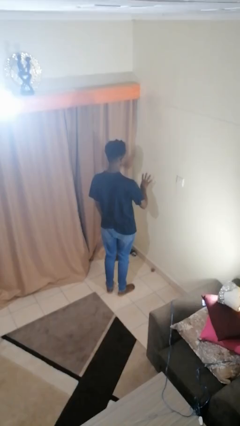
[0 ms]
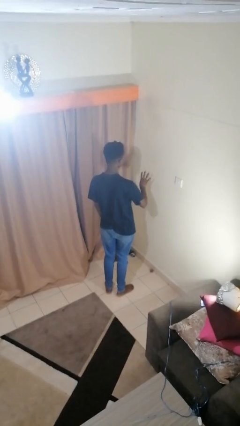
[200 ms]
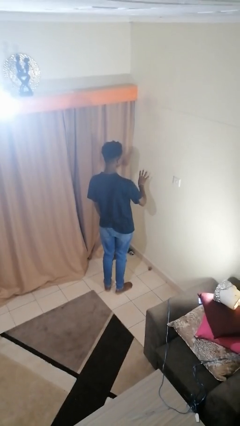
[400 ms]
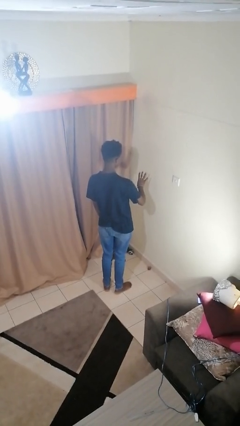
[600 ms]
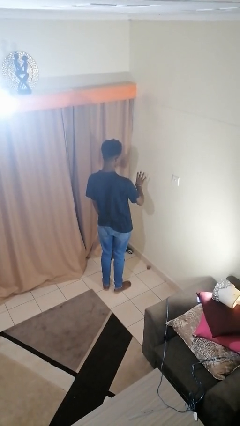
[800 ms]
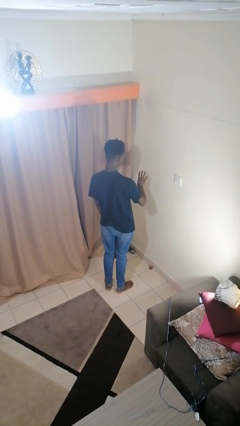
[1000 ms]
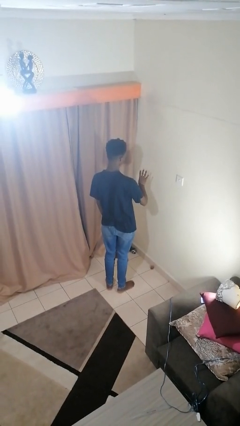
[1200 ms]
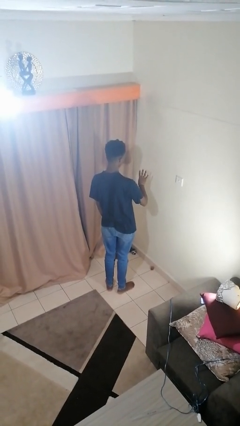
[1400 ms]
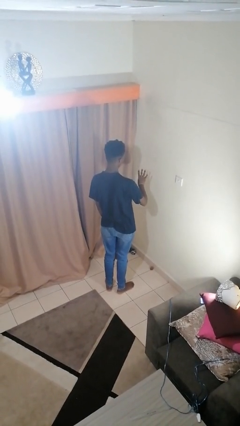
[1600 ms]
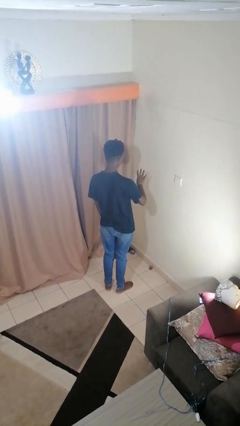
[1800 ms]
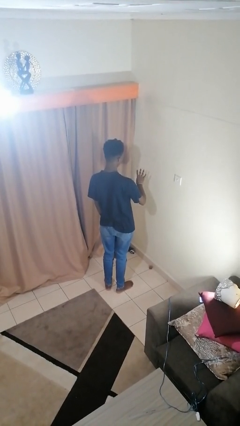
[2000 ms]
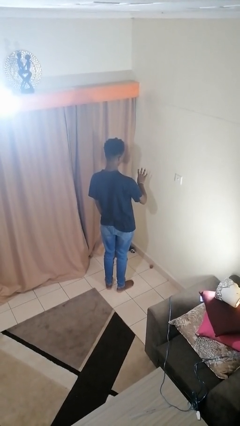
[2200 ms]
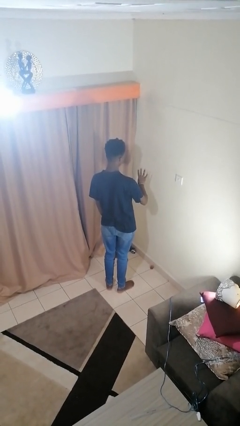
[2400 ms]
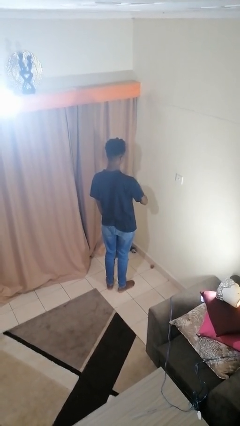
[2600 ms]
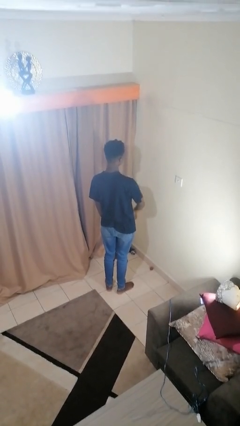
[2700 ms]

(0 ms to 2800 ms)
person gestures number four

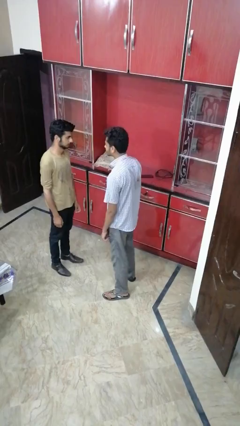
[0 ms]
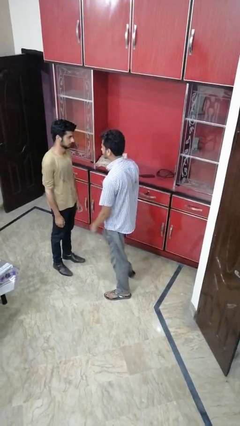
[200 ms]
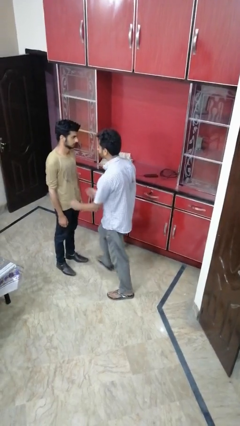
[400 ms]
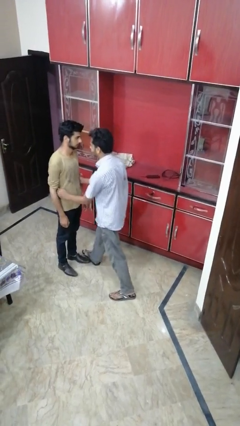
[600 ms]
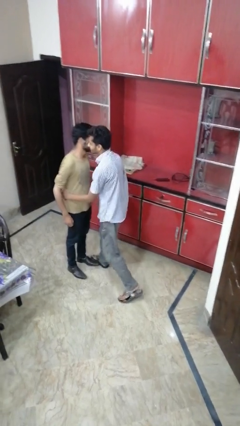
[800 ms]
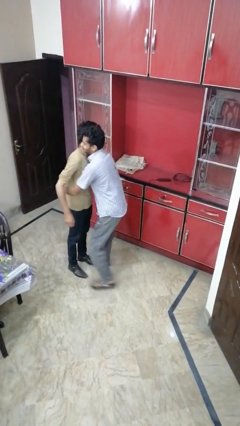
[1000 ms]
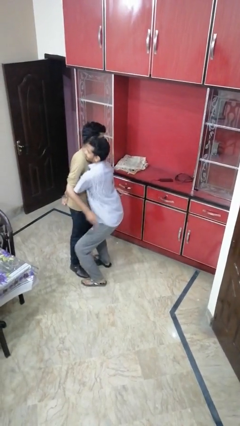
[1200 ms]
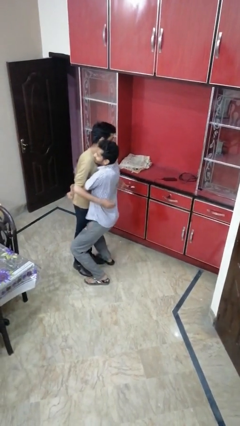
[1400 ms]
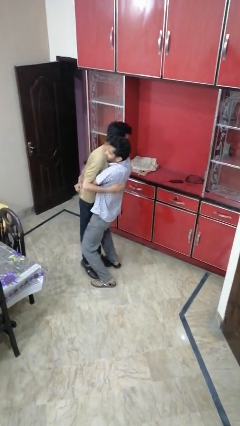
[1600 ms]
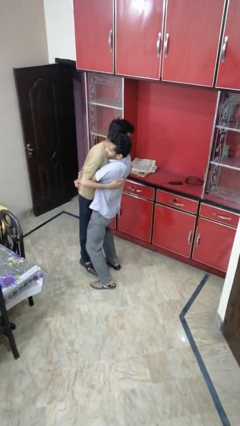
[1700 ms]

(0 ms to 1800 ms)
person laughs with person

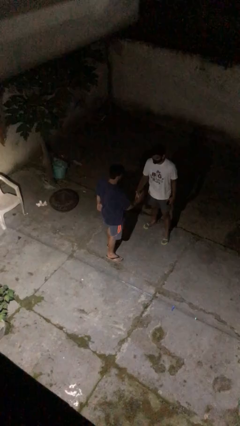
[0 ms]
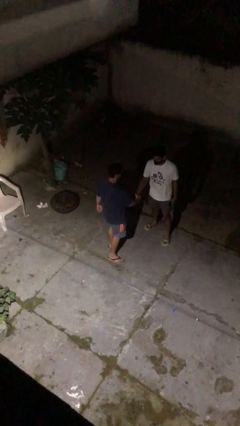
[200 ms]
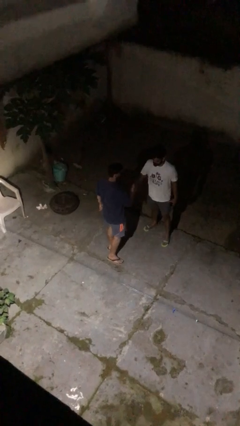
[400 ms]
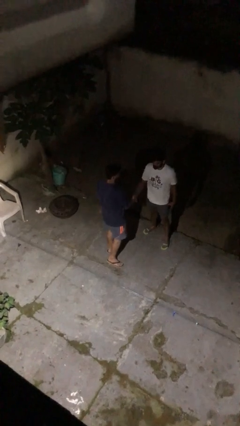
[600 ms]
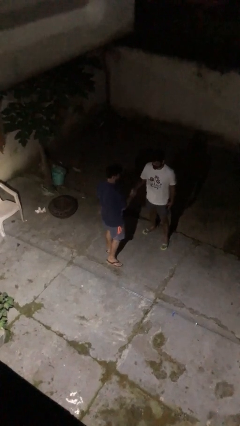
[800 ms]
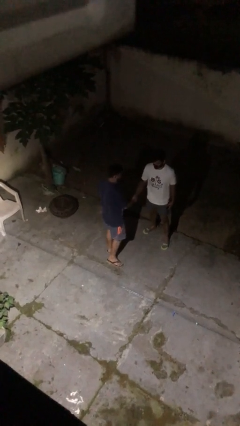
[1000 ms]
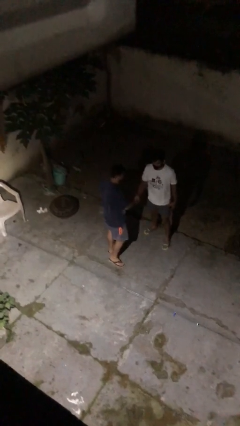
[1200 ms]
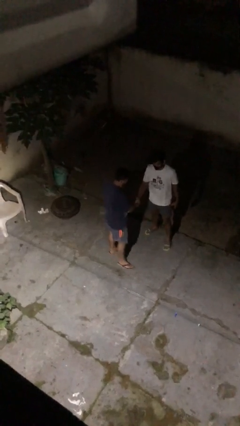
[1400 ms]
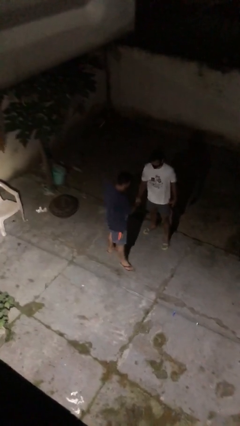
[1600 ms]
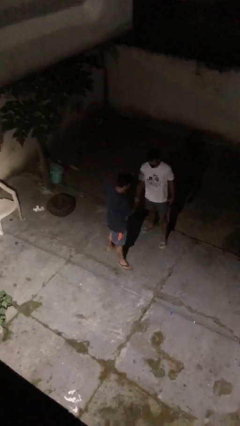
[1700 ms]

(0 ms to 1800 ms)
person shakes hand

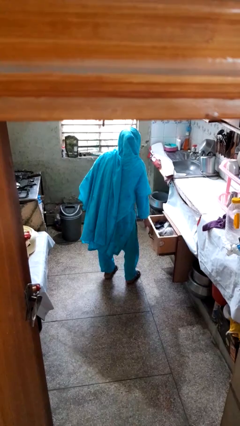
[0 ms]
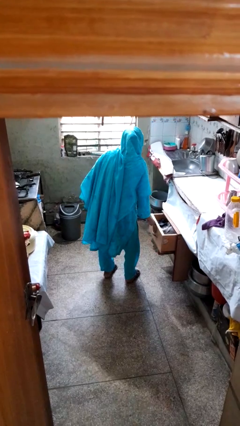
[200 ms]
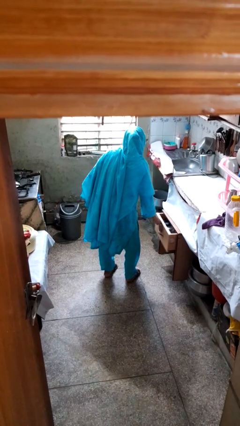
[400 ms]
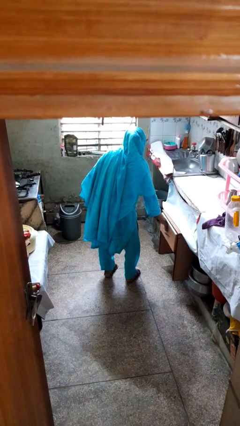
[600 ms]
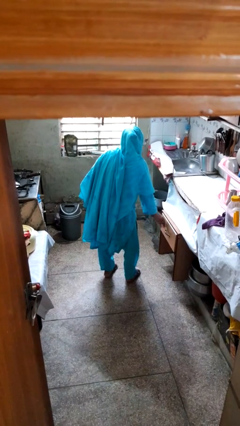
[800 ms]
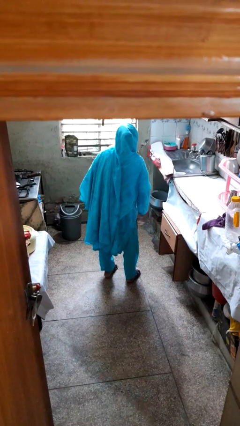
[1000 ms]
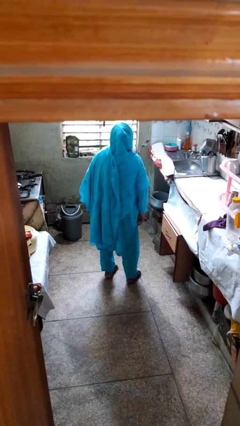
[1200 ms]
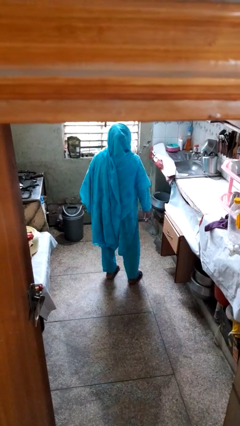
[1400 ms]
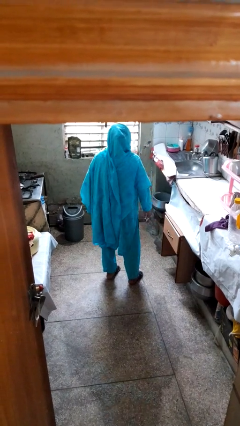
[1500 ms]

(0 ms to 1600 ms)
person closes kitchen drawer

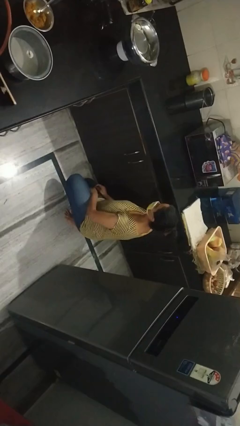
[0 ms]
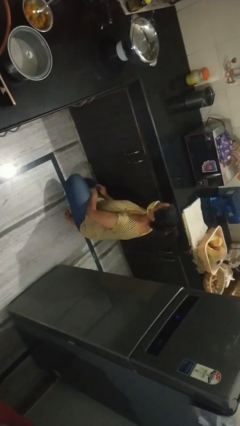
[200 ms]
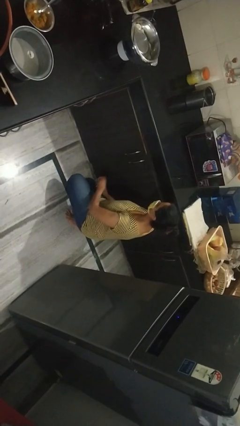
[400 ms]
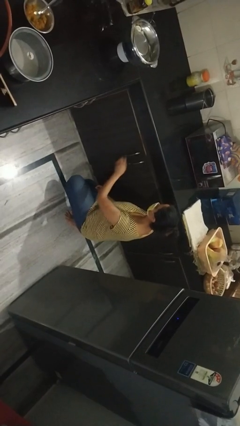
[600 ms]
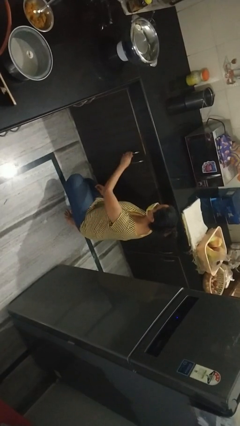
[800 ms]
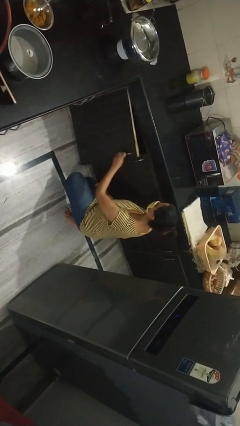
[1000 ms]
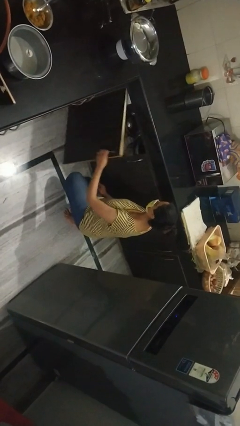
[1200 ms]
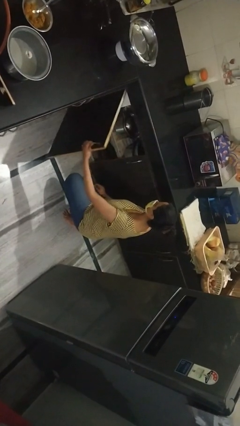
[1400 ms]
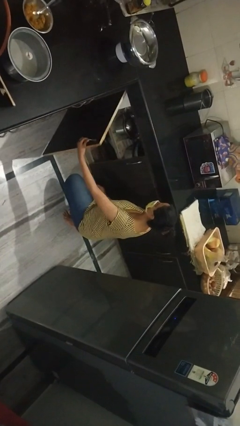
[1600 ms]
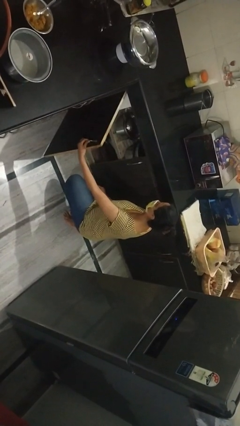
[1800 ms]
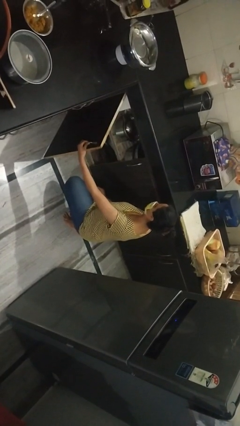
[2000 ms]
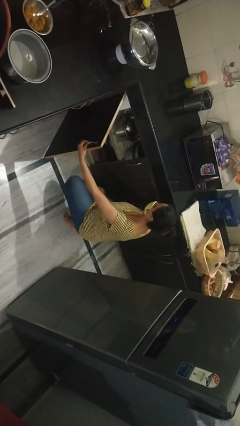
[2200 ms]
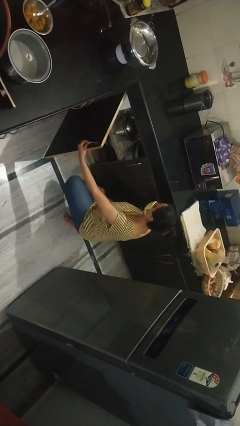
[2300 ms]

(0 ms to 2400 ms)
person opens cabinet

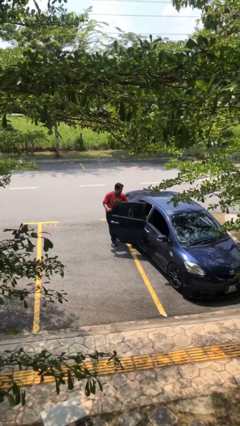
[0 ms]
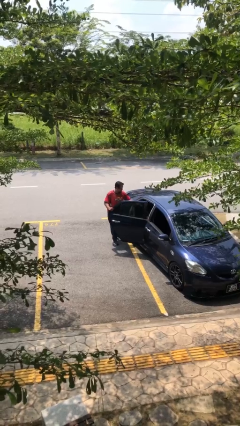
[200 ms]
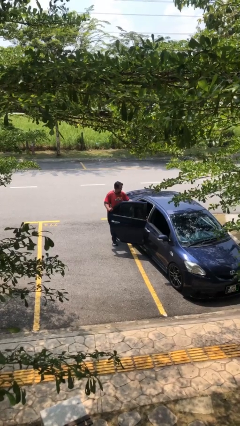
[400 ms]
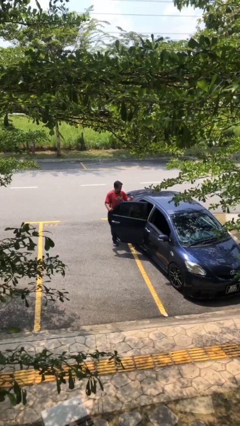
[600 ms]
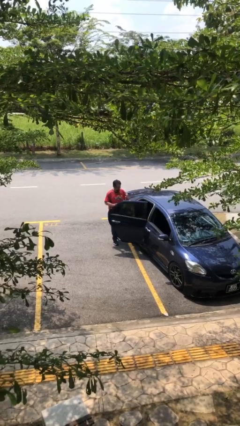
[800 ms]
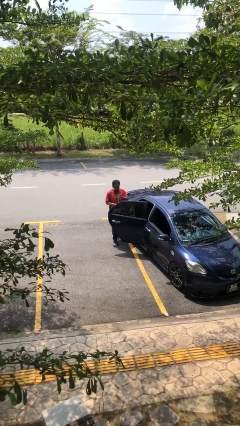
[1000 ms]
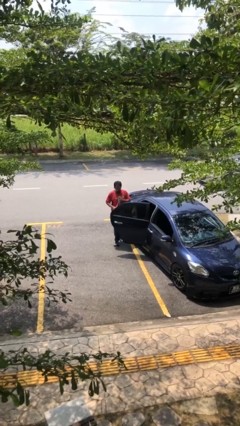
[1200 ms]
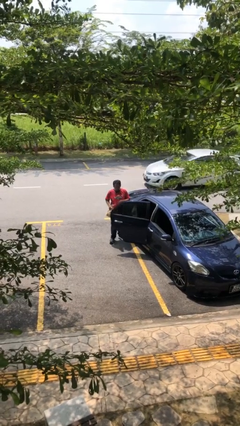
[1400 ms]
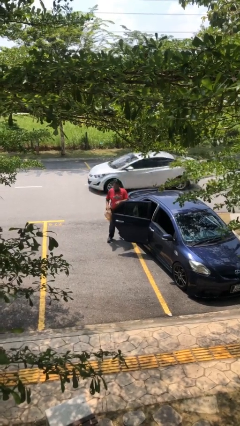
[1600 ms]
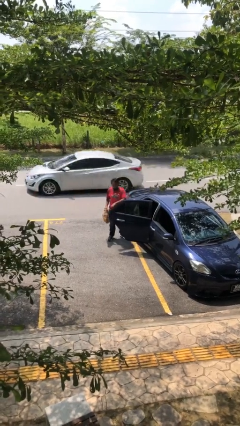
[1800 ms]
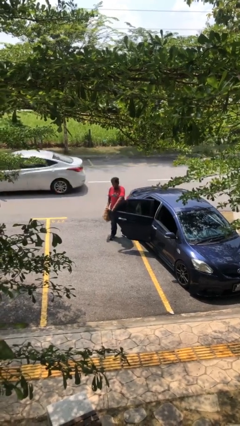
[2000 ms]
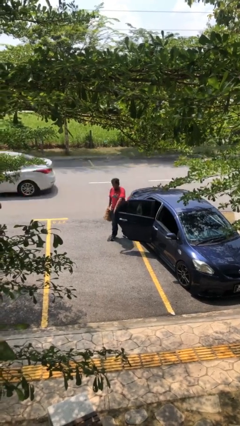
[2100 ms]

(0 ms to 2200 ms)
person unloads car

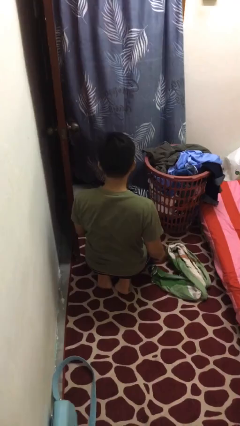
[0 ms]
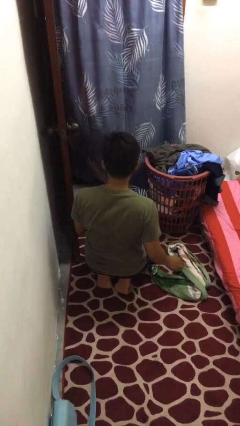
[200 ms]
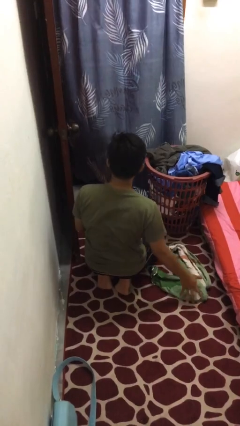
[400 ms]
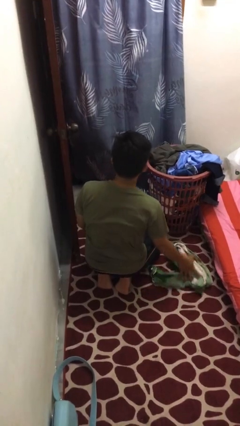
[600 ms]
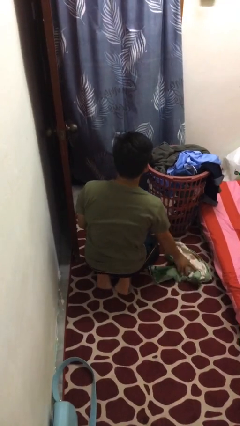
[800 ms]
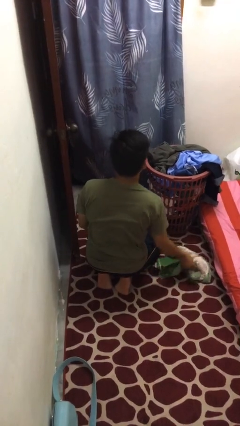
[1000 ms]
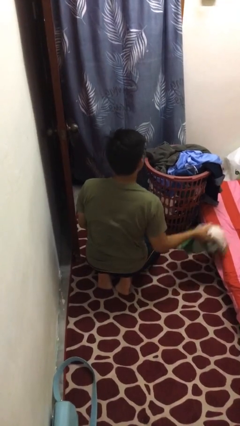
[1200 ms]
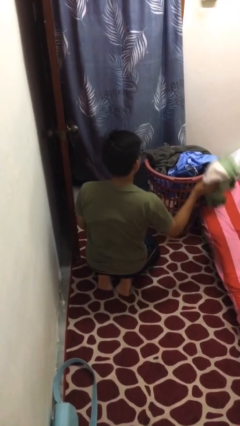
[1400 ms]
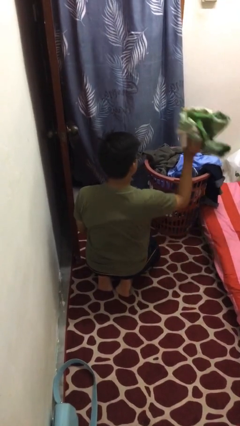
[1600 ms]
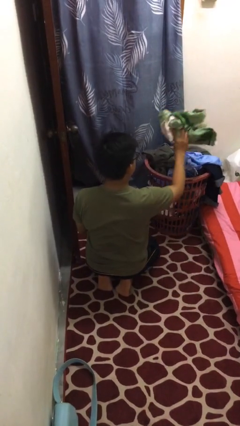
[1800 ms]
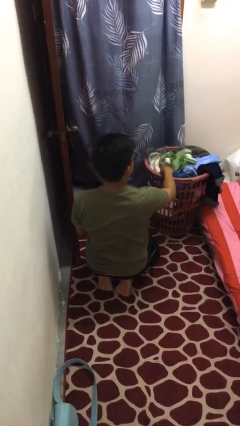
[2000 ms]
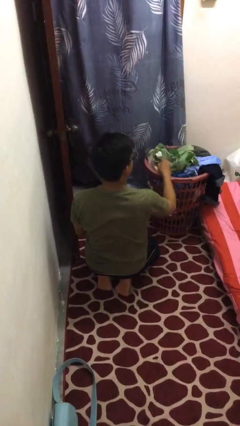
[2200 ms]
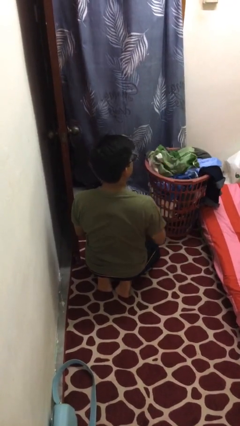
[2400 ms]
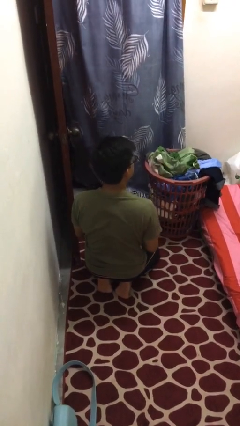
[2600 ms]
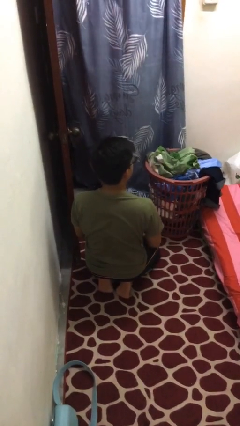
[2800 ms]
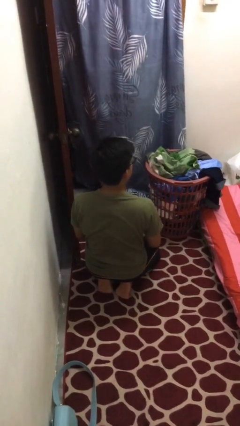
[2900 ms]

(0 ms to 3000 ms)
person puts object into basket

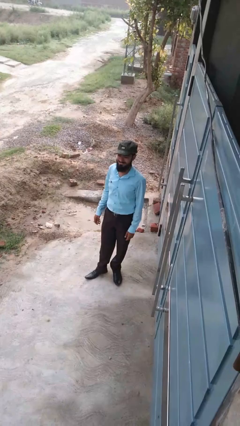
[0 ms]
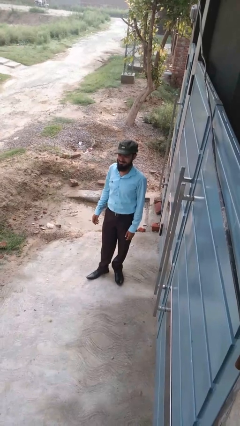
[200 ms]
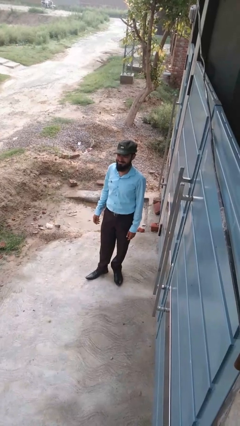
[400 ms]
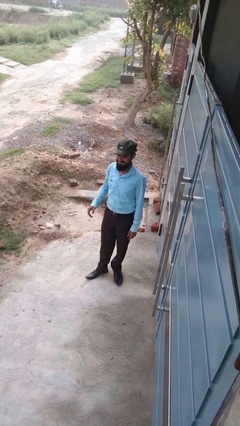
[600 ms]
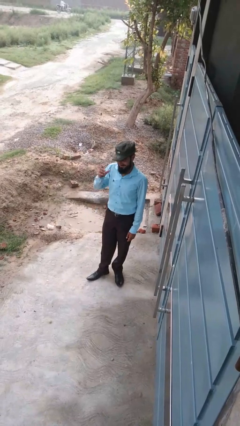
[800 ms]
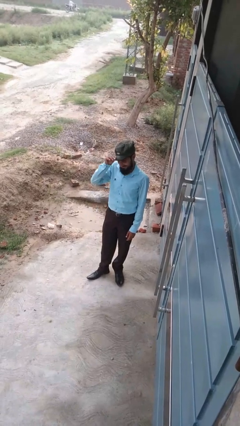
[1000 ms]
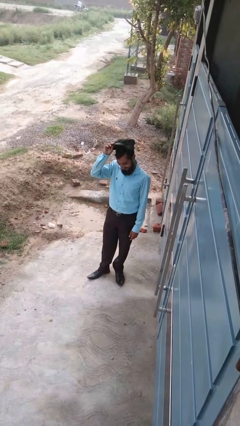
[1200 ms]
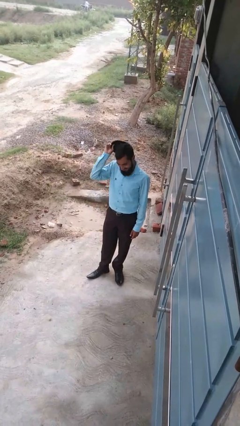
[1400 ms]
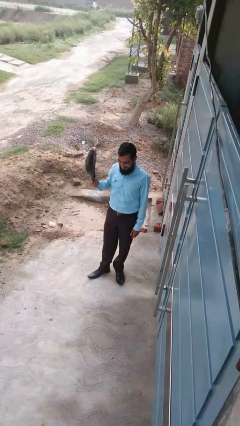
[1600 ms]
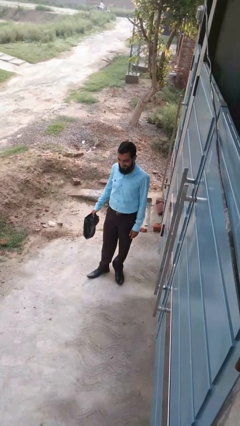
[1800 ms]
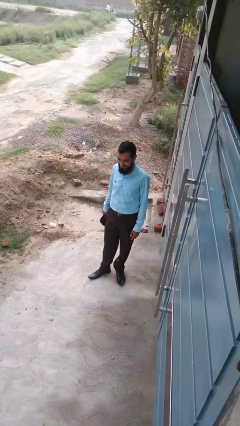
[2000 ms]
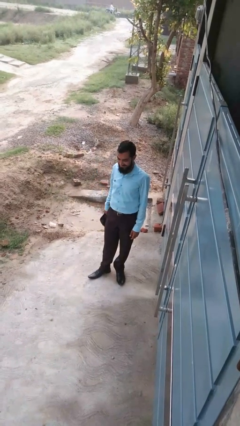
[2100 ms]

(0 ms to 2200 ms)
person takes off hat
